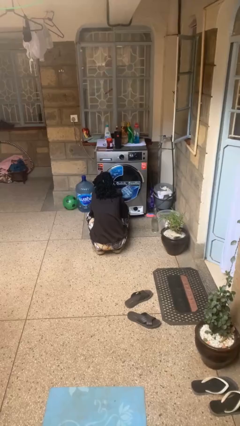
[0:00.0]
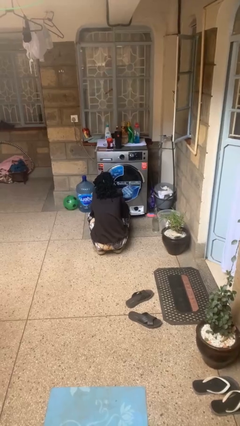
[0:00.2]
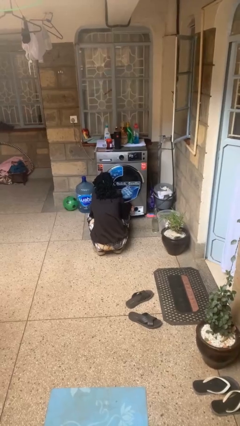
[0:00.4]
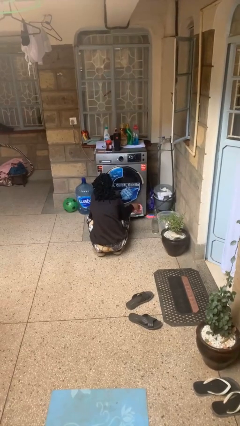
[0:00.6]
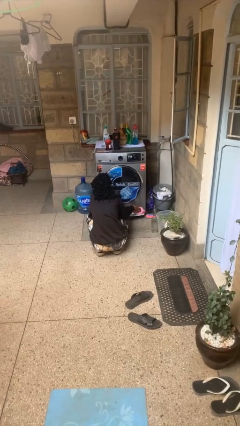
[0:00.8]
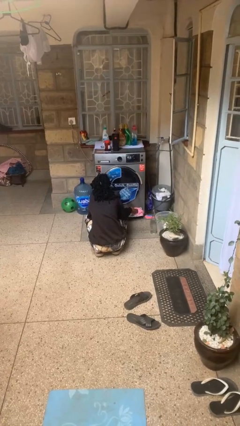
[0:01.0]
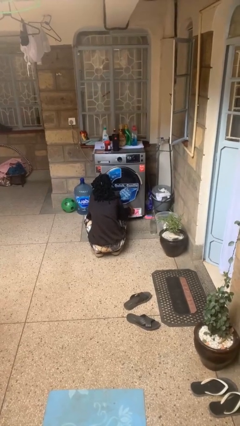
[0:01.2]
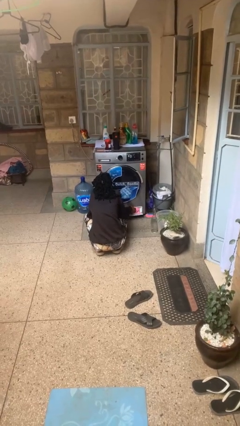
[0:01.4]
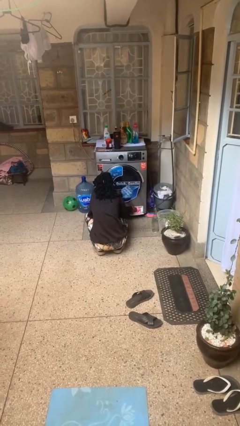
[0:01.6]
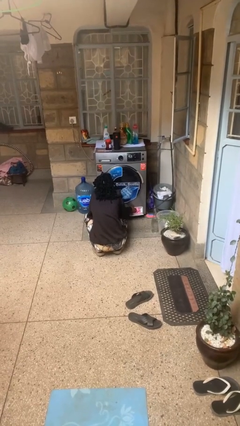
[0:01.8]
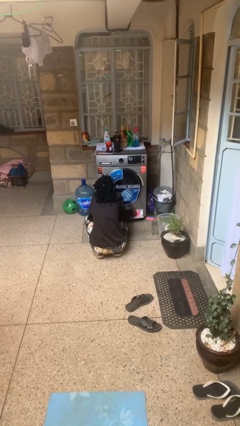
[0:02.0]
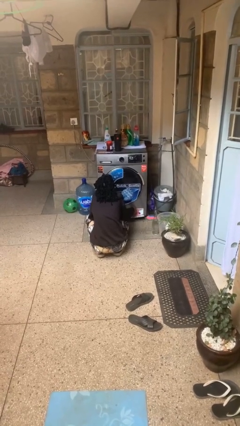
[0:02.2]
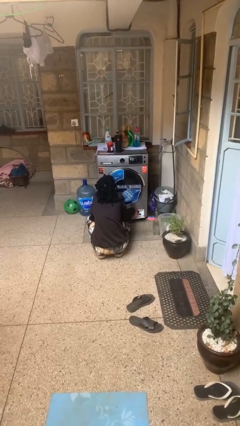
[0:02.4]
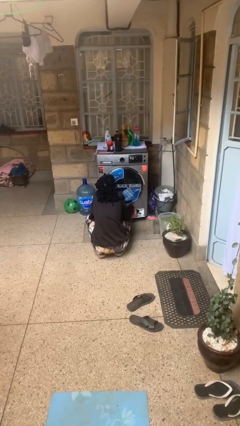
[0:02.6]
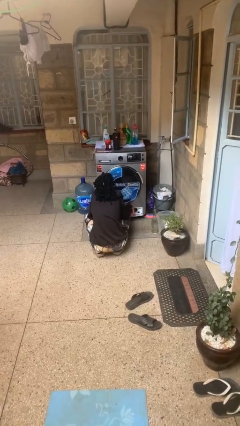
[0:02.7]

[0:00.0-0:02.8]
person cleans dryer lint trap

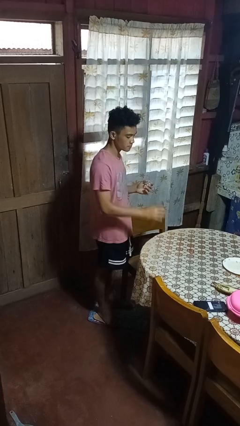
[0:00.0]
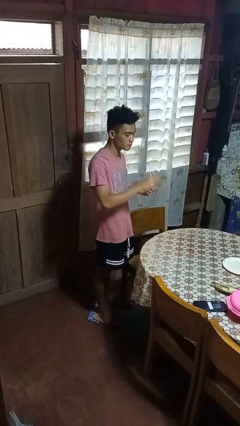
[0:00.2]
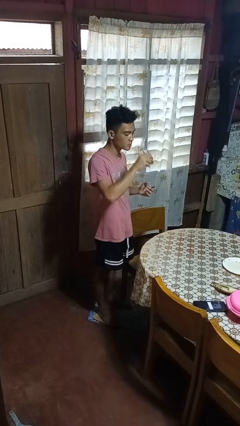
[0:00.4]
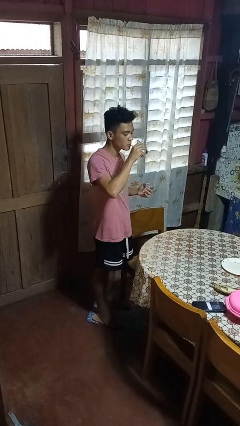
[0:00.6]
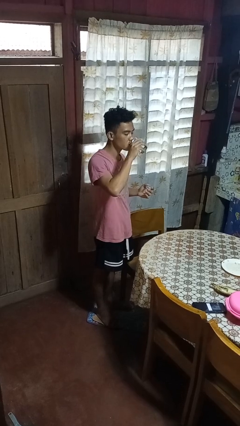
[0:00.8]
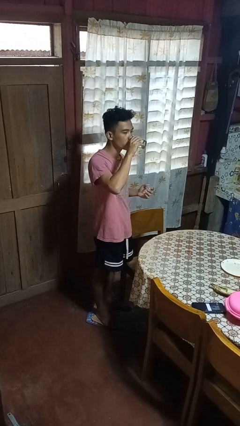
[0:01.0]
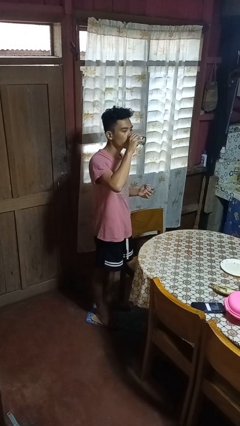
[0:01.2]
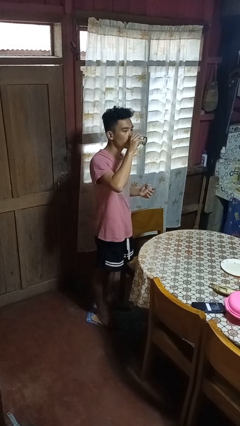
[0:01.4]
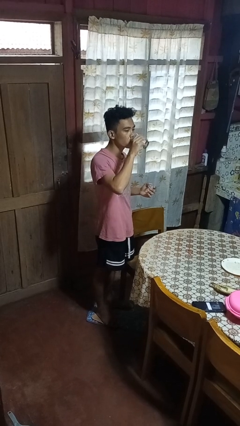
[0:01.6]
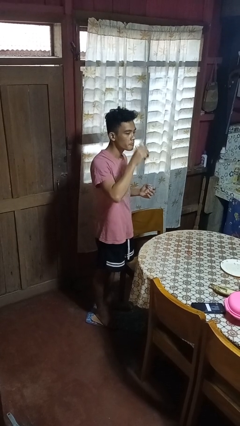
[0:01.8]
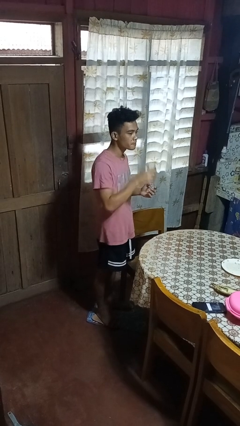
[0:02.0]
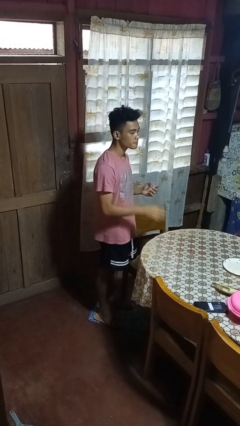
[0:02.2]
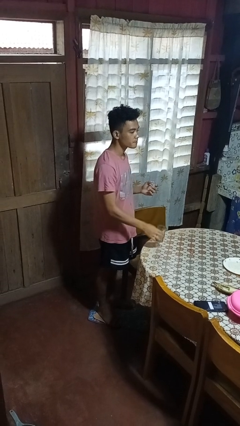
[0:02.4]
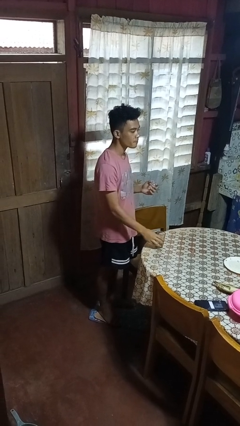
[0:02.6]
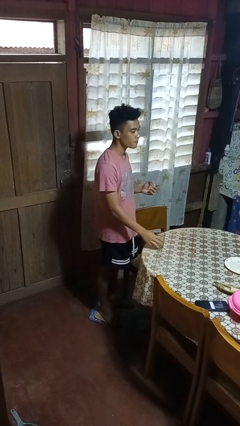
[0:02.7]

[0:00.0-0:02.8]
person drinks from cup

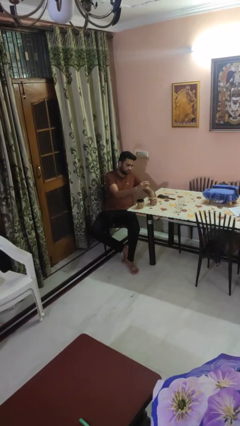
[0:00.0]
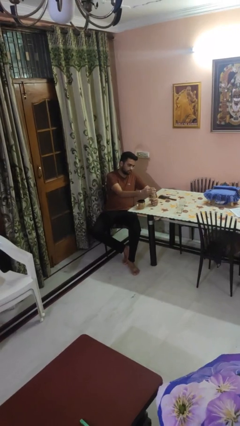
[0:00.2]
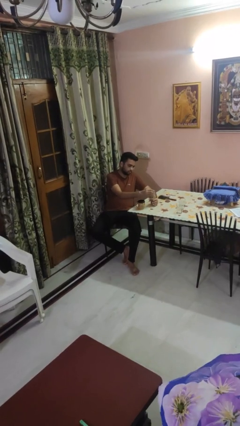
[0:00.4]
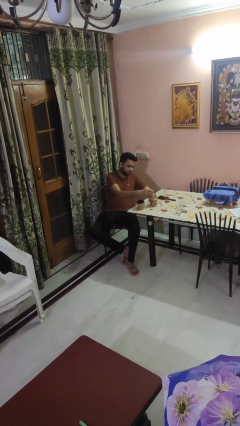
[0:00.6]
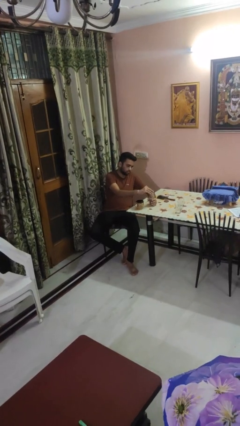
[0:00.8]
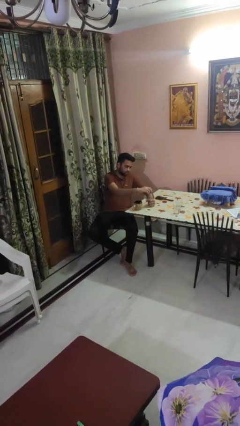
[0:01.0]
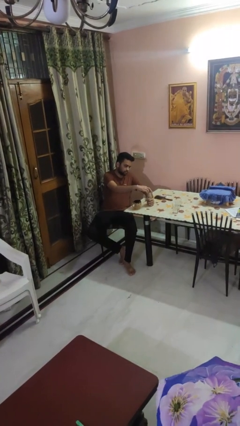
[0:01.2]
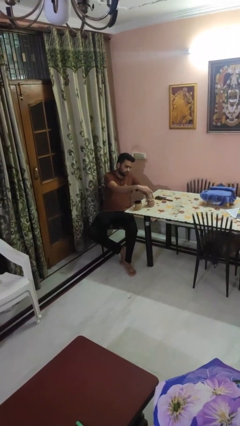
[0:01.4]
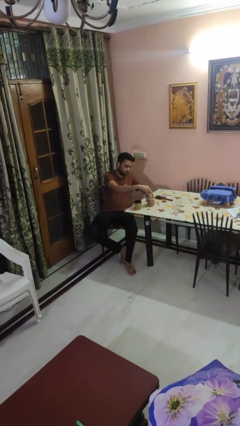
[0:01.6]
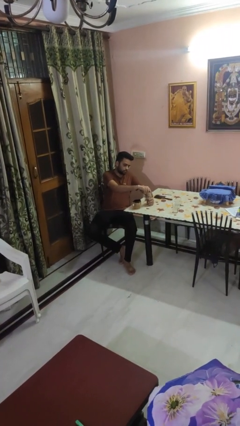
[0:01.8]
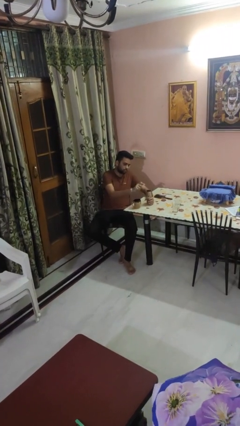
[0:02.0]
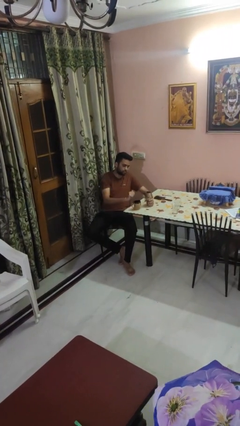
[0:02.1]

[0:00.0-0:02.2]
person screws lid to bottle

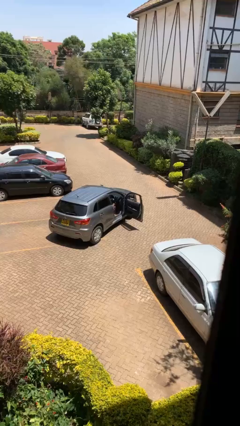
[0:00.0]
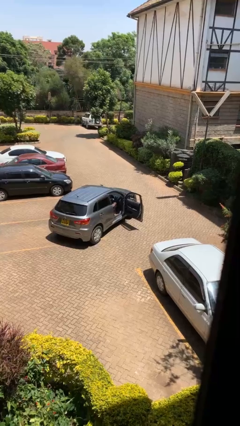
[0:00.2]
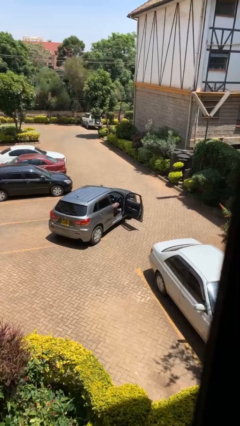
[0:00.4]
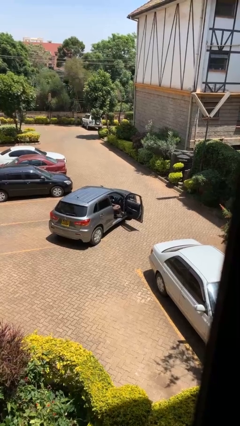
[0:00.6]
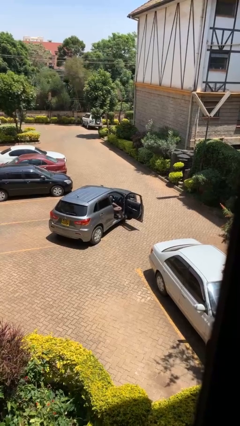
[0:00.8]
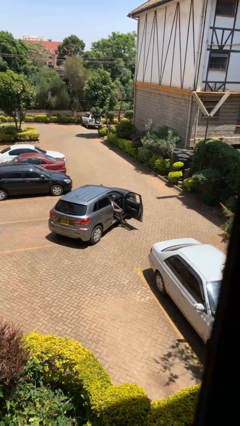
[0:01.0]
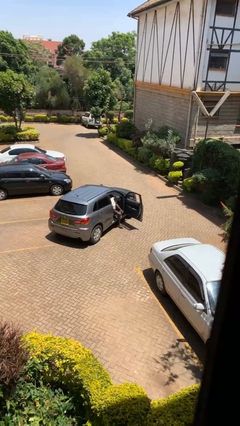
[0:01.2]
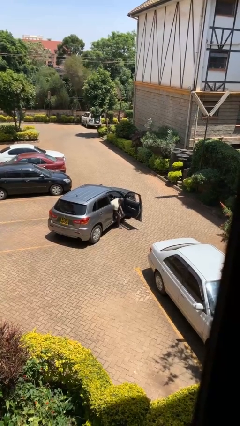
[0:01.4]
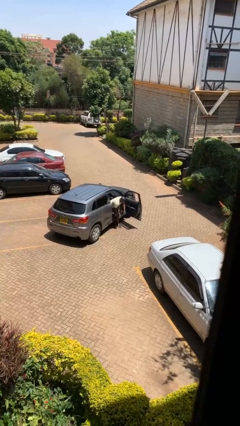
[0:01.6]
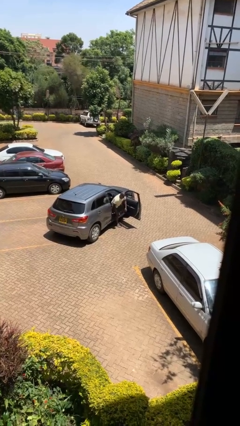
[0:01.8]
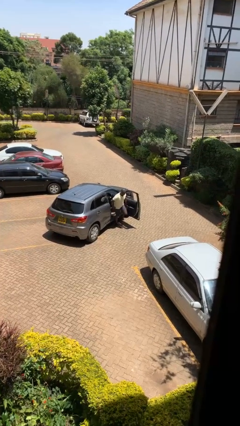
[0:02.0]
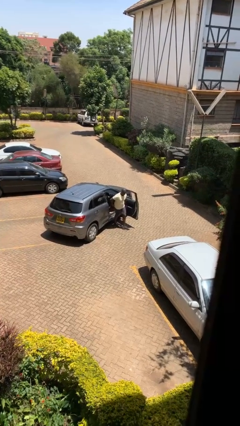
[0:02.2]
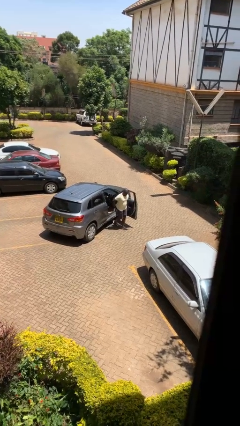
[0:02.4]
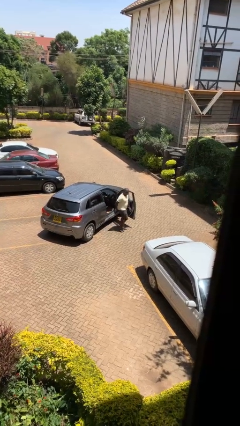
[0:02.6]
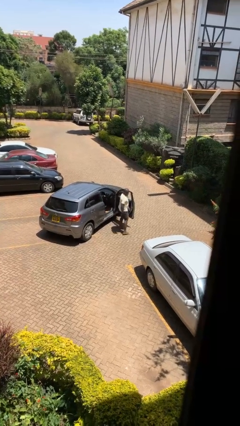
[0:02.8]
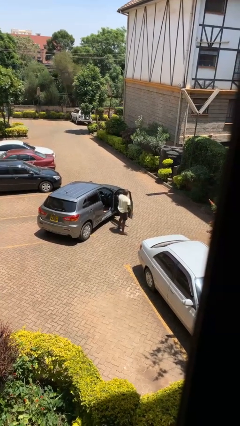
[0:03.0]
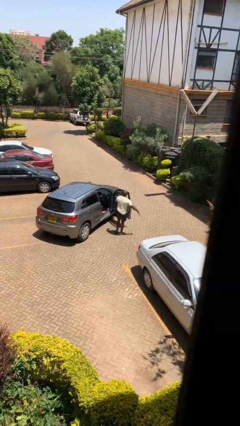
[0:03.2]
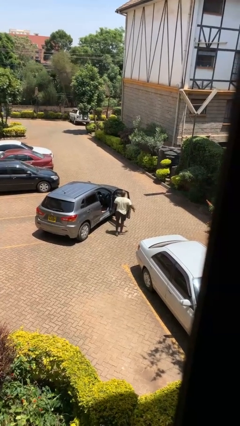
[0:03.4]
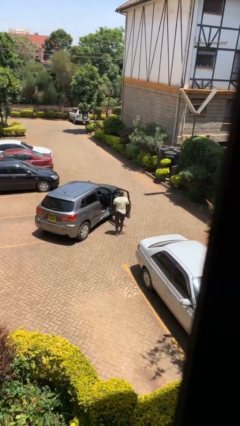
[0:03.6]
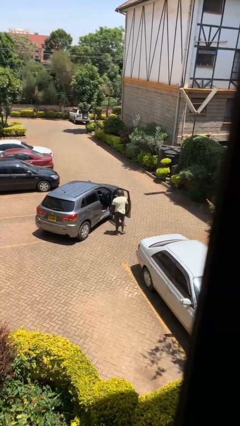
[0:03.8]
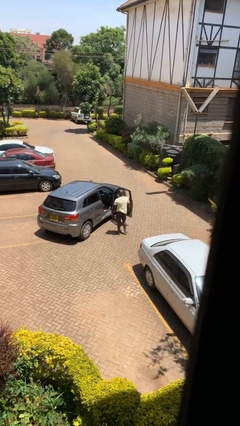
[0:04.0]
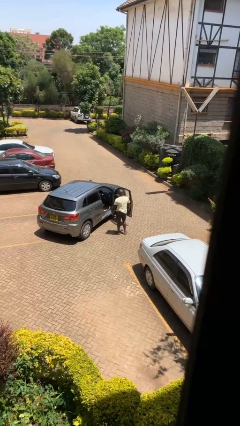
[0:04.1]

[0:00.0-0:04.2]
person exits car

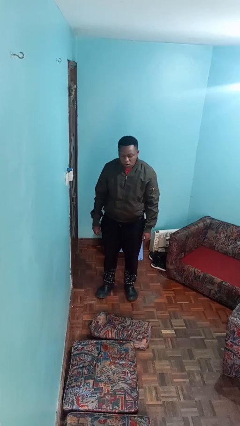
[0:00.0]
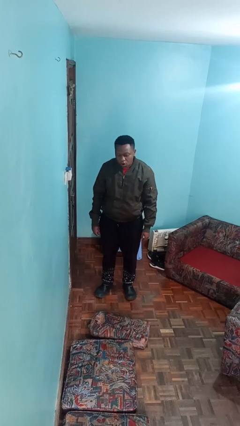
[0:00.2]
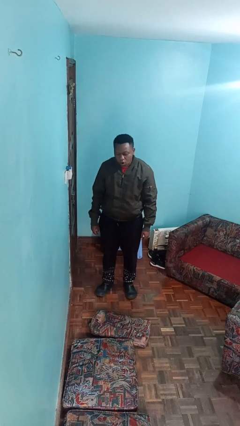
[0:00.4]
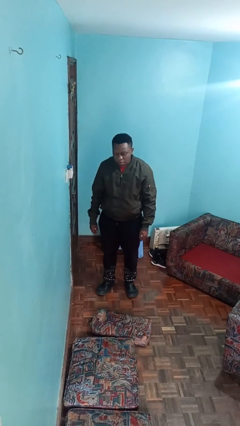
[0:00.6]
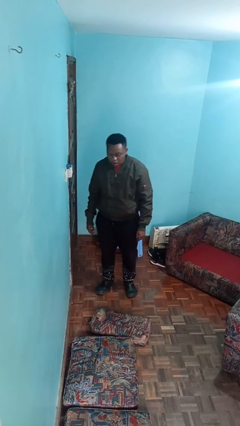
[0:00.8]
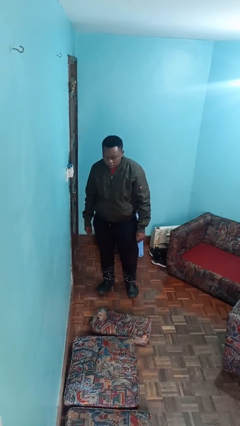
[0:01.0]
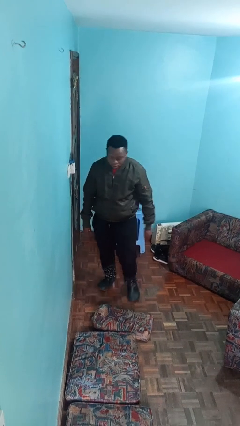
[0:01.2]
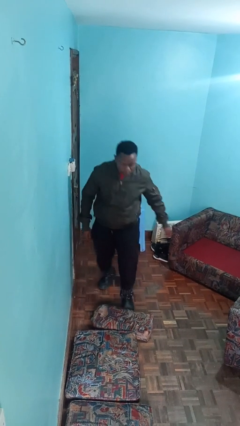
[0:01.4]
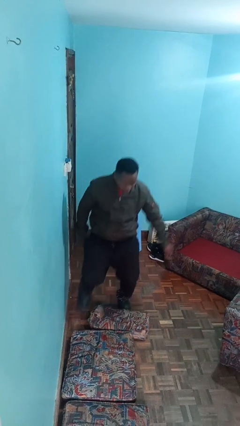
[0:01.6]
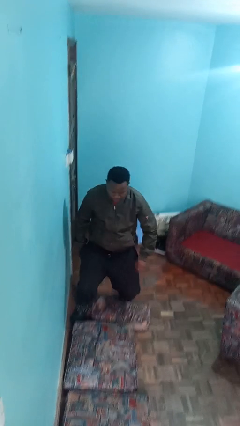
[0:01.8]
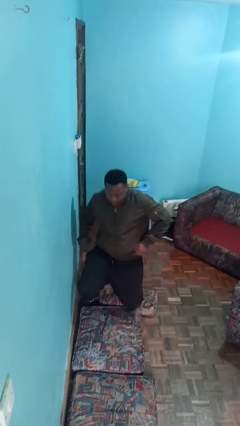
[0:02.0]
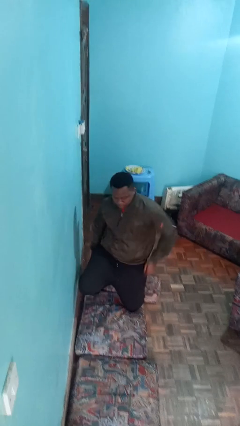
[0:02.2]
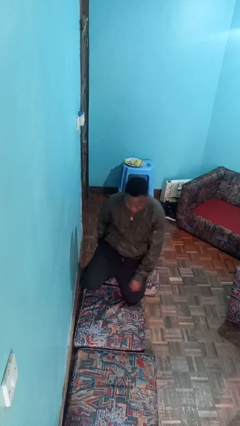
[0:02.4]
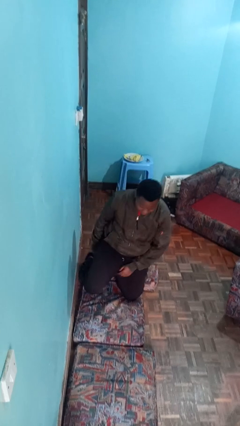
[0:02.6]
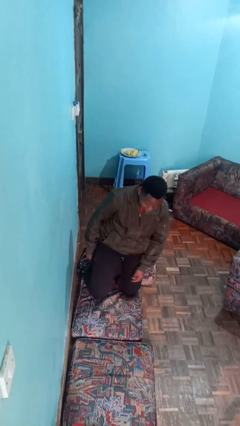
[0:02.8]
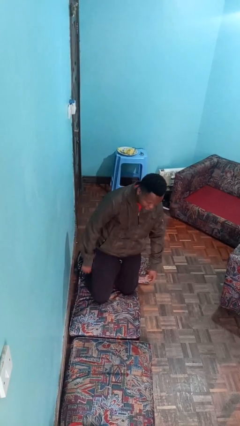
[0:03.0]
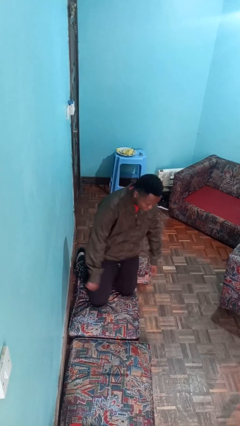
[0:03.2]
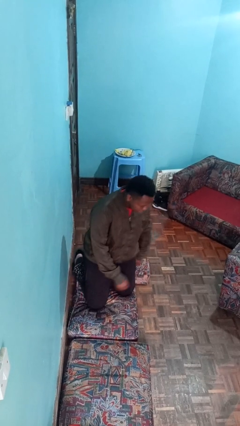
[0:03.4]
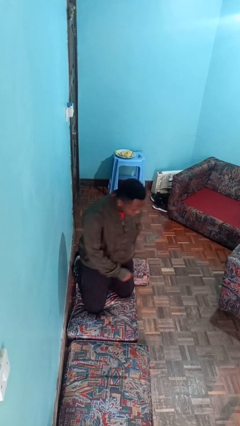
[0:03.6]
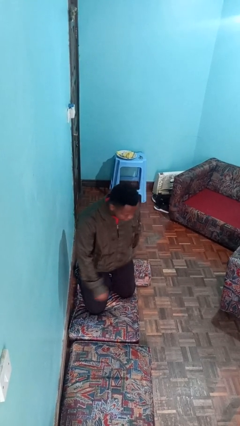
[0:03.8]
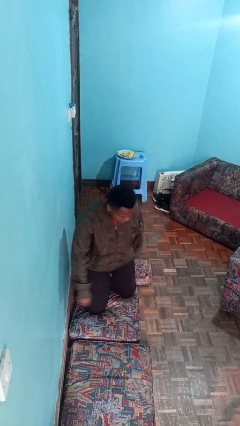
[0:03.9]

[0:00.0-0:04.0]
person trips on object on floor

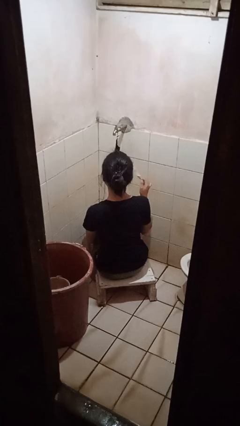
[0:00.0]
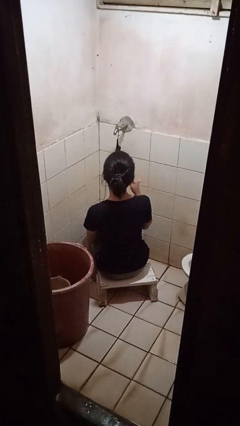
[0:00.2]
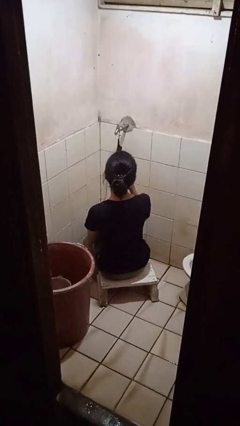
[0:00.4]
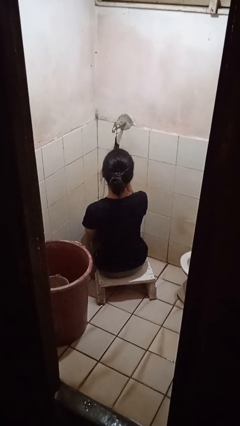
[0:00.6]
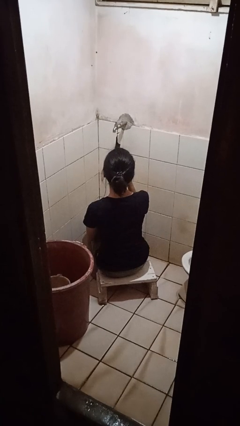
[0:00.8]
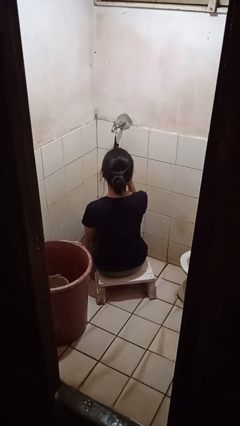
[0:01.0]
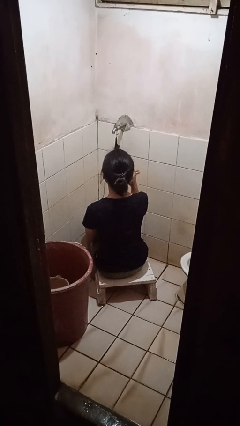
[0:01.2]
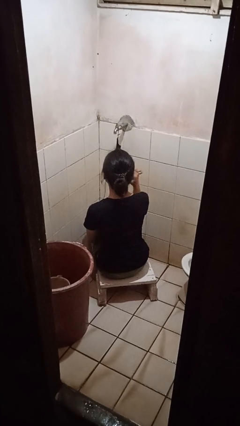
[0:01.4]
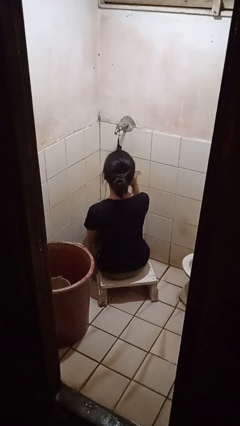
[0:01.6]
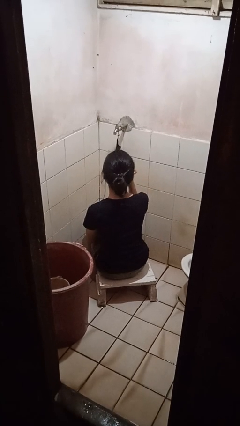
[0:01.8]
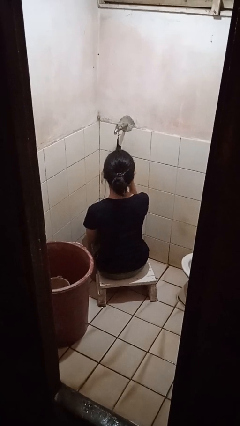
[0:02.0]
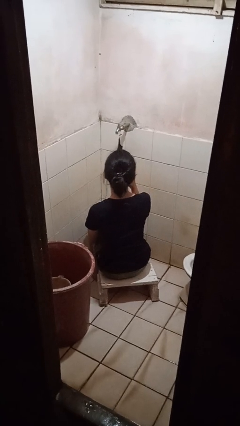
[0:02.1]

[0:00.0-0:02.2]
person brushes teeth
